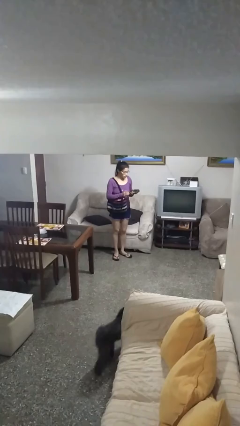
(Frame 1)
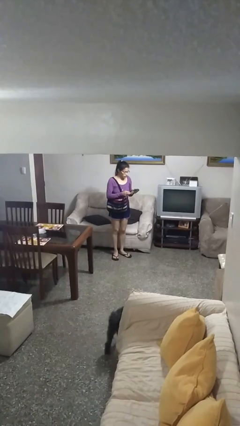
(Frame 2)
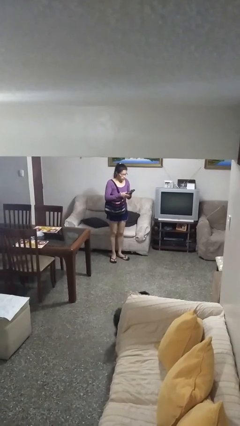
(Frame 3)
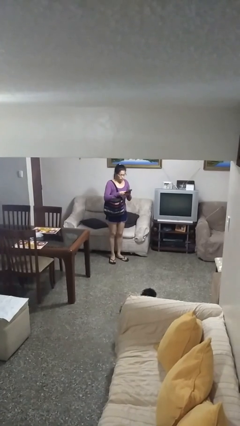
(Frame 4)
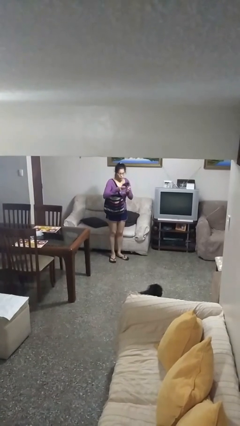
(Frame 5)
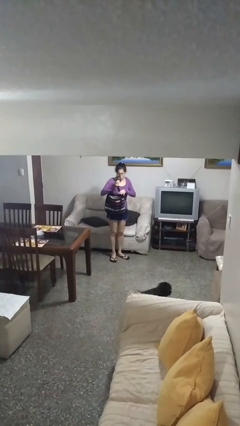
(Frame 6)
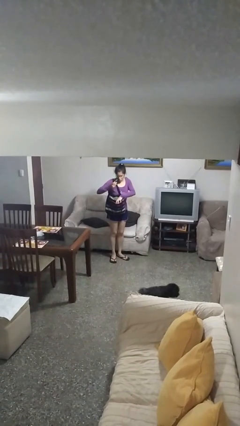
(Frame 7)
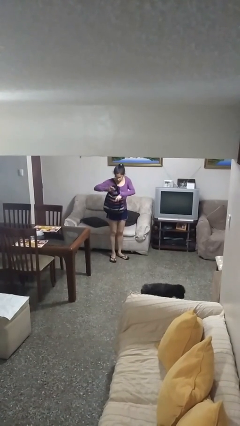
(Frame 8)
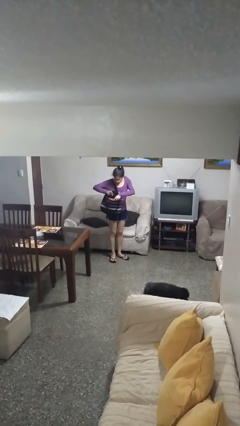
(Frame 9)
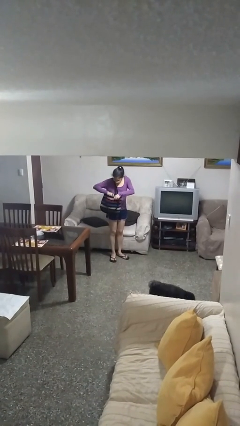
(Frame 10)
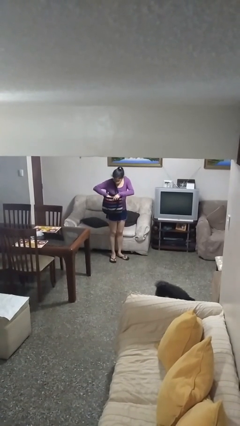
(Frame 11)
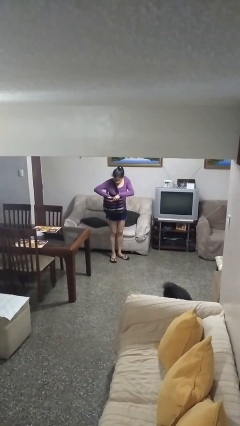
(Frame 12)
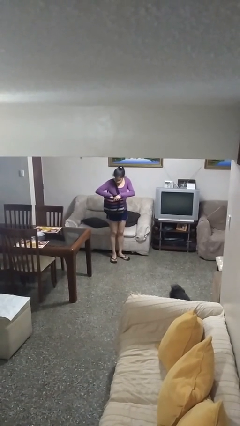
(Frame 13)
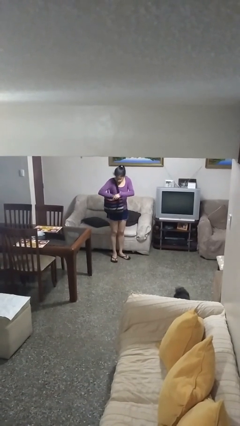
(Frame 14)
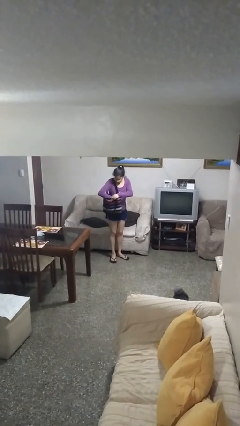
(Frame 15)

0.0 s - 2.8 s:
person puts object into purse

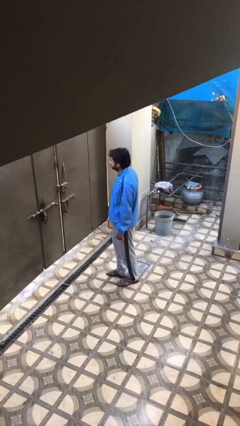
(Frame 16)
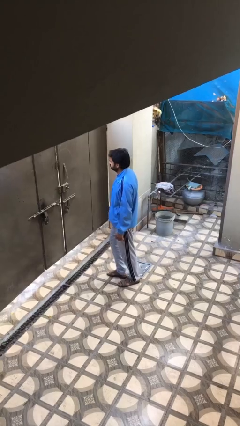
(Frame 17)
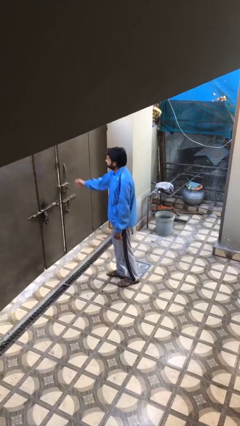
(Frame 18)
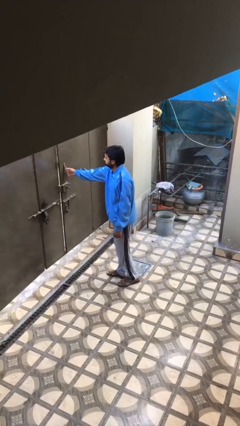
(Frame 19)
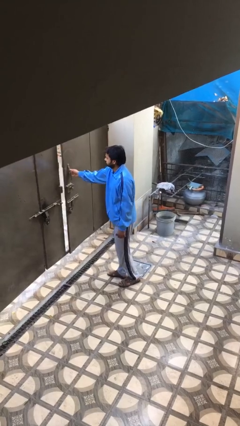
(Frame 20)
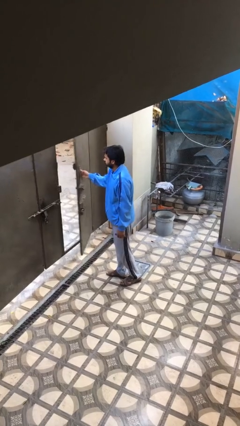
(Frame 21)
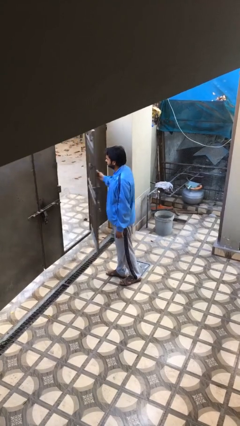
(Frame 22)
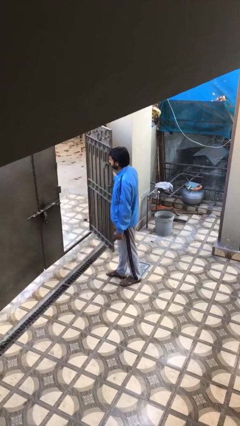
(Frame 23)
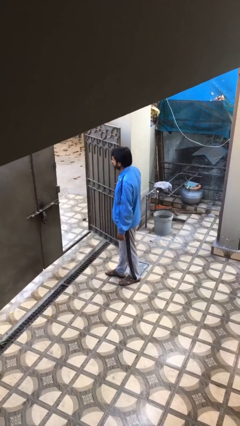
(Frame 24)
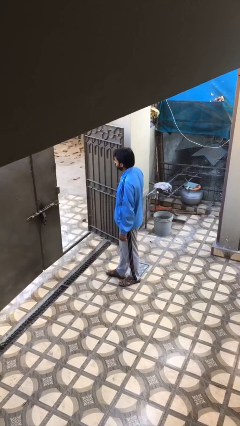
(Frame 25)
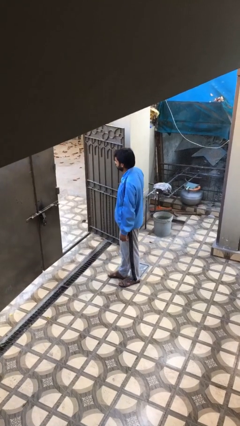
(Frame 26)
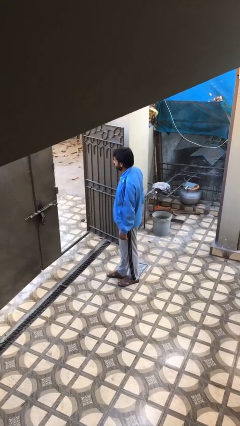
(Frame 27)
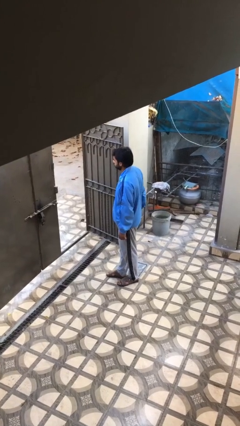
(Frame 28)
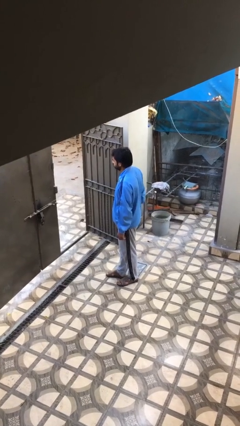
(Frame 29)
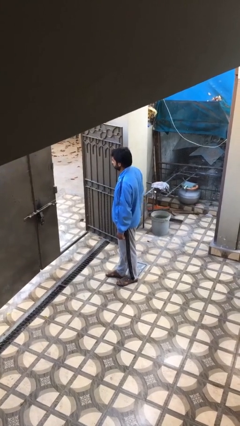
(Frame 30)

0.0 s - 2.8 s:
person opens facility door

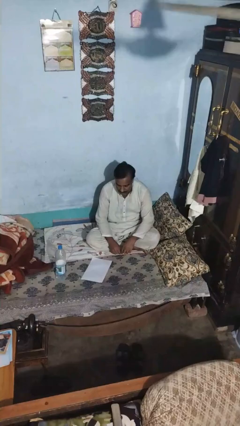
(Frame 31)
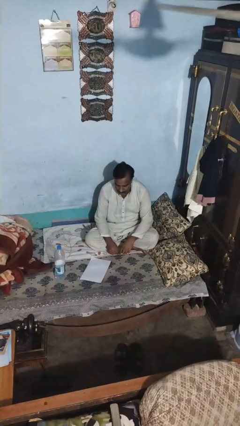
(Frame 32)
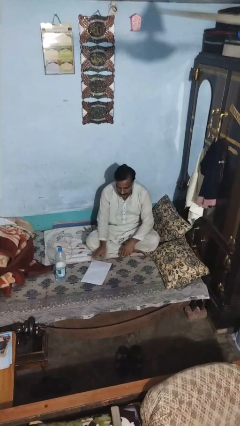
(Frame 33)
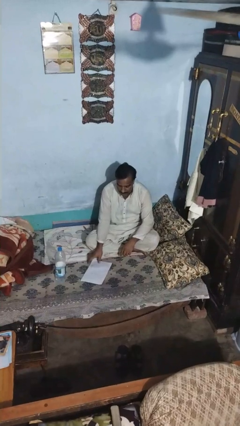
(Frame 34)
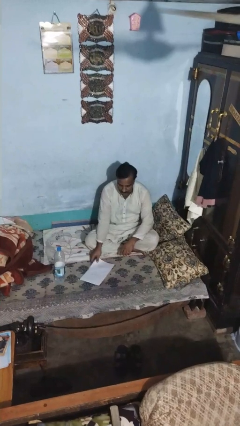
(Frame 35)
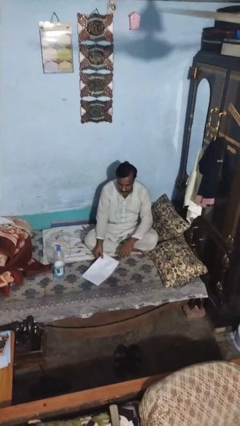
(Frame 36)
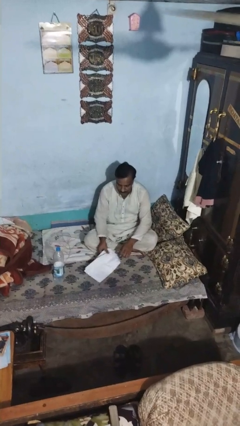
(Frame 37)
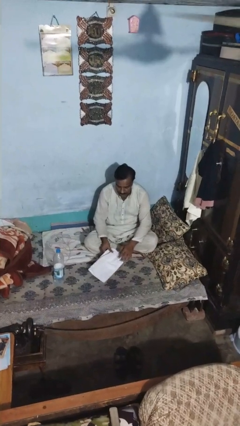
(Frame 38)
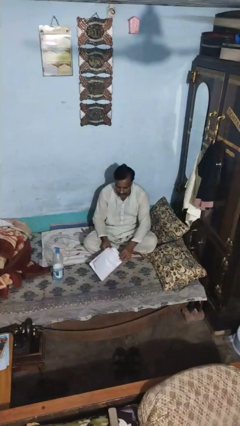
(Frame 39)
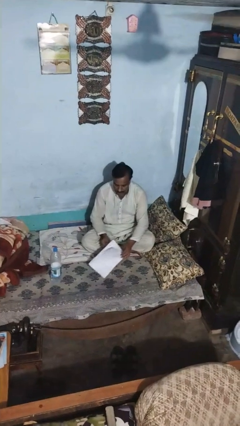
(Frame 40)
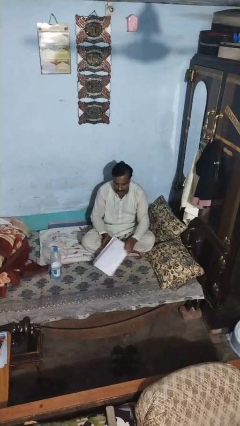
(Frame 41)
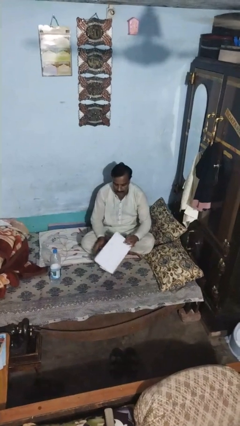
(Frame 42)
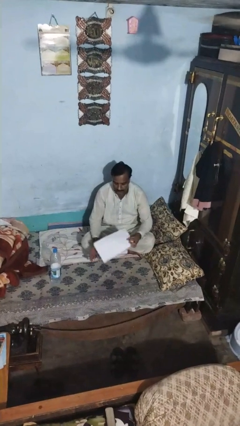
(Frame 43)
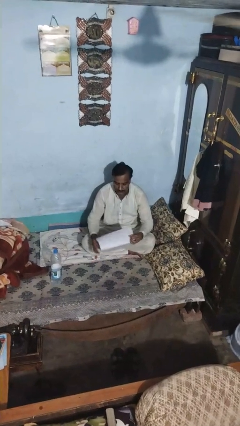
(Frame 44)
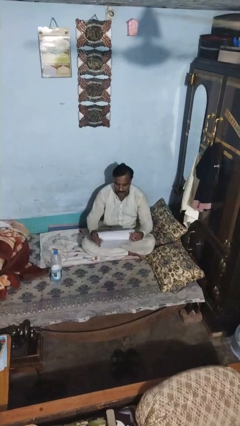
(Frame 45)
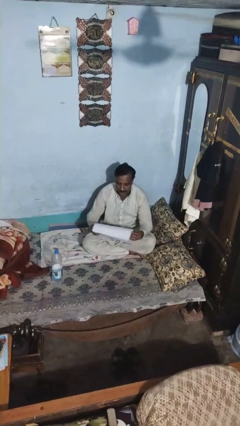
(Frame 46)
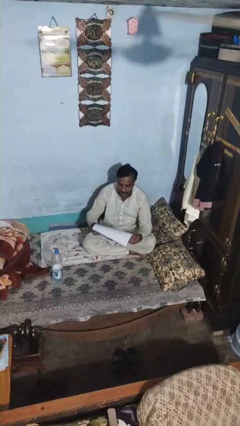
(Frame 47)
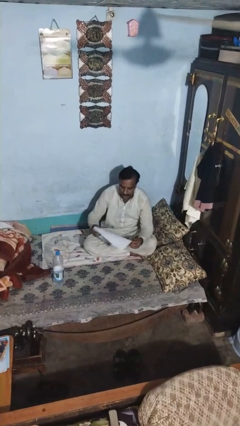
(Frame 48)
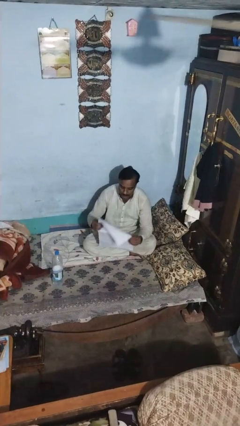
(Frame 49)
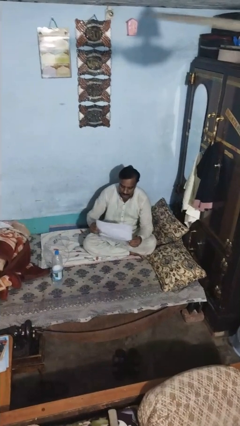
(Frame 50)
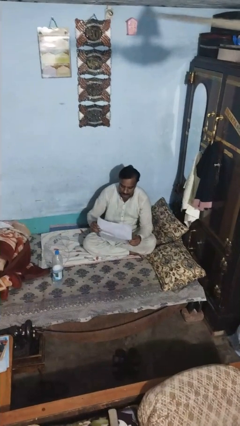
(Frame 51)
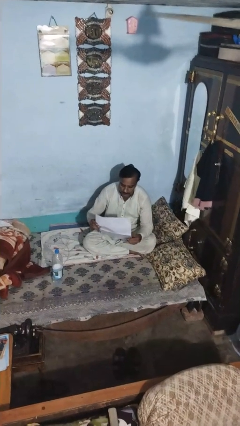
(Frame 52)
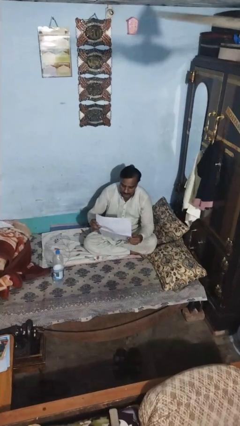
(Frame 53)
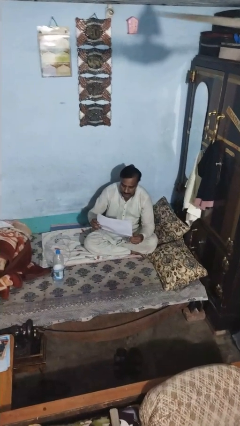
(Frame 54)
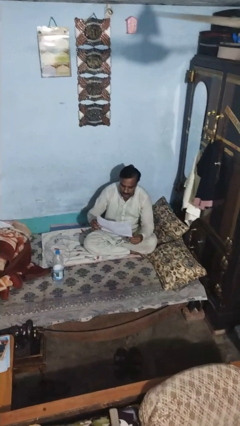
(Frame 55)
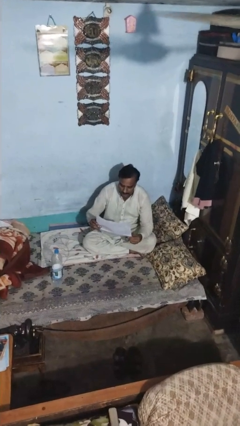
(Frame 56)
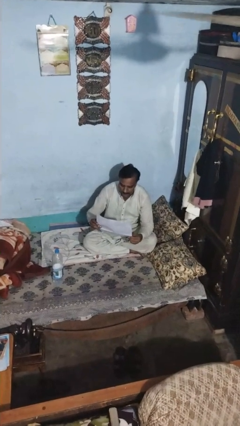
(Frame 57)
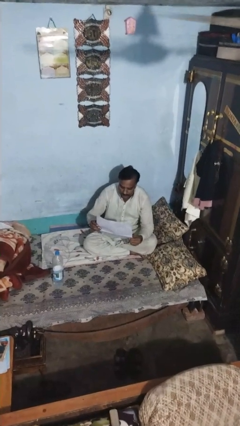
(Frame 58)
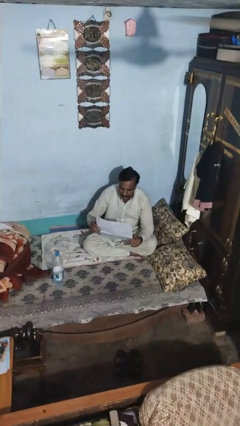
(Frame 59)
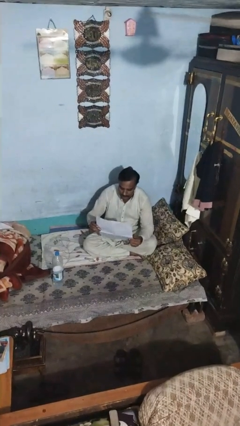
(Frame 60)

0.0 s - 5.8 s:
person reads newspaper

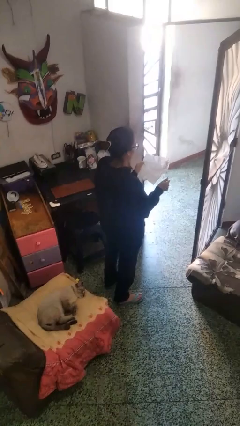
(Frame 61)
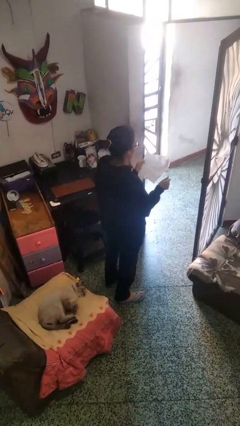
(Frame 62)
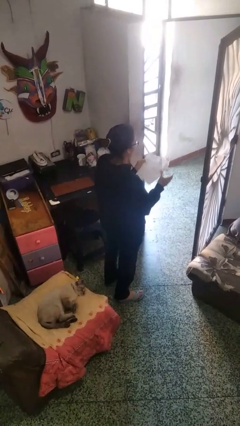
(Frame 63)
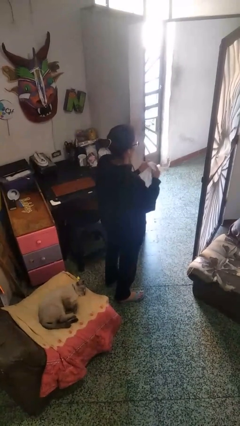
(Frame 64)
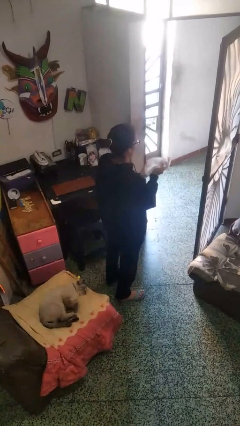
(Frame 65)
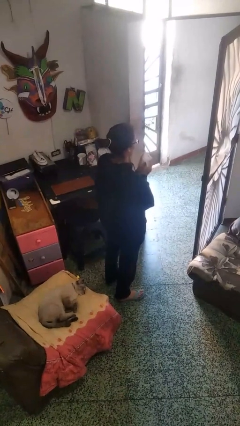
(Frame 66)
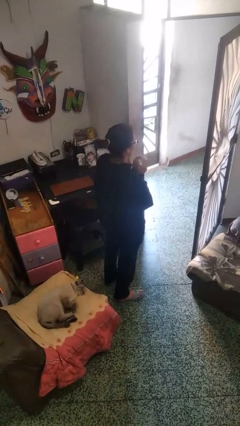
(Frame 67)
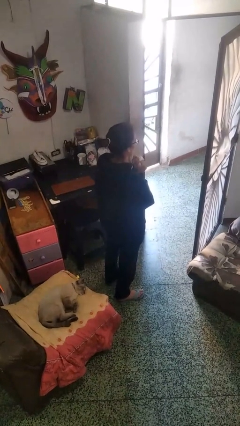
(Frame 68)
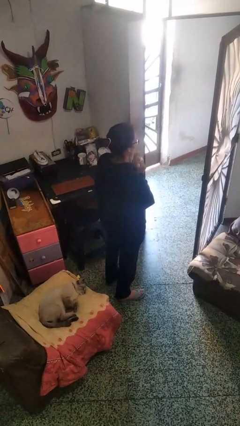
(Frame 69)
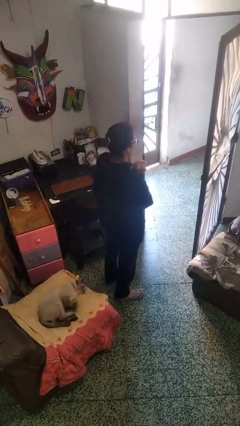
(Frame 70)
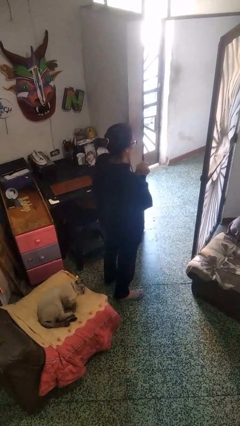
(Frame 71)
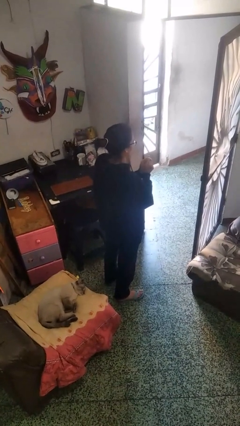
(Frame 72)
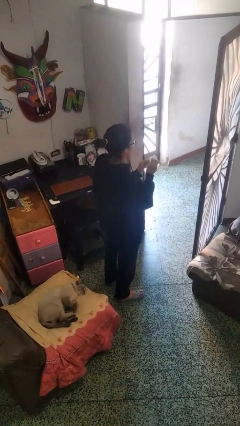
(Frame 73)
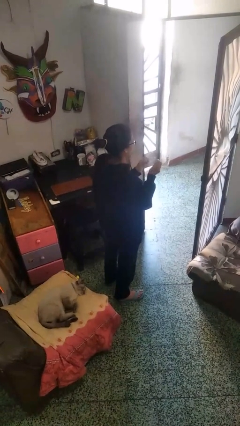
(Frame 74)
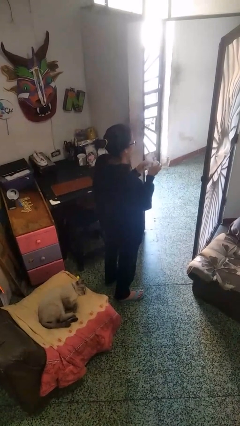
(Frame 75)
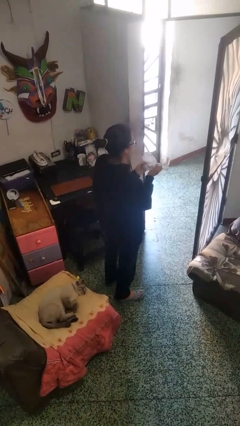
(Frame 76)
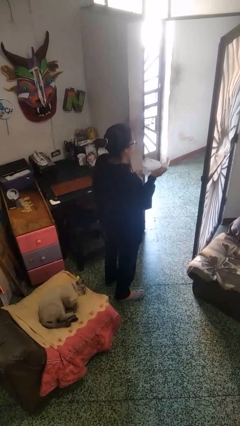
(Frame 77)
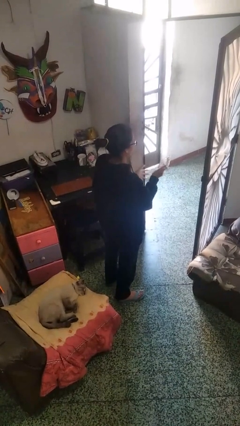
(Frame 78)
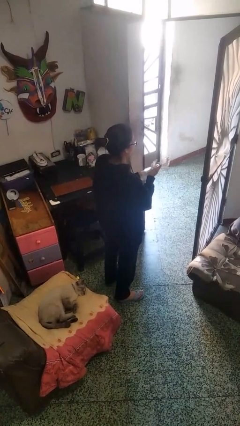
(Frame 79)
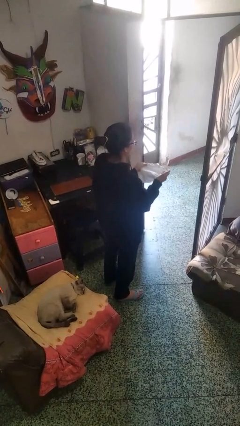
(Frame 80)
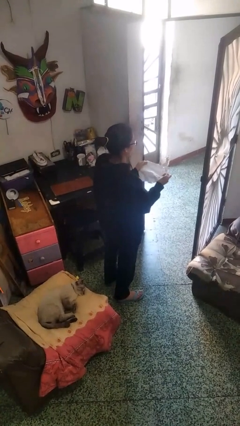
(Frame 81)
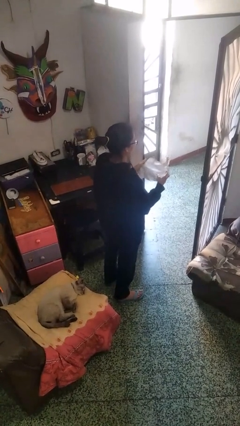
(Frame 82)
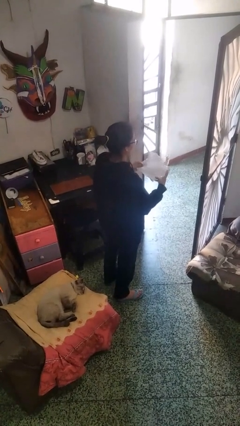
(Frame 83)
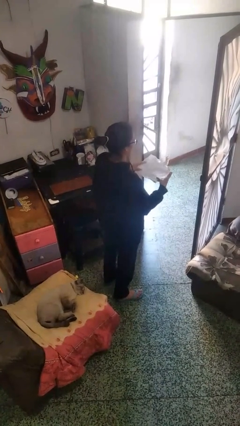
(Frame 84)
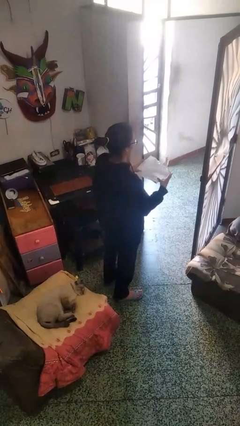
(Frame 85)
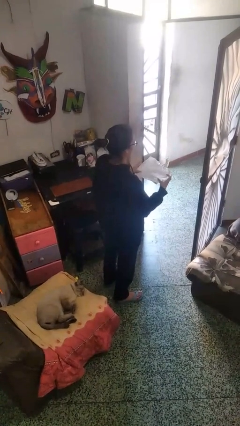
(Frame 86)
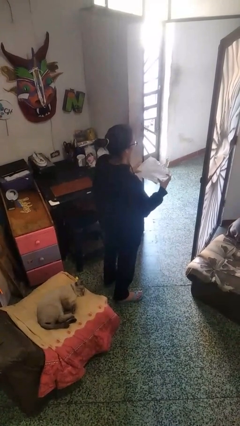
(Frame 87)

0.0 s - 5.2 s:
person crumples paper

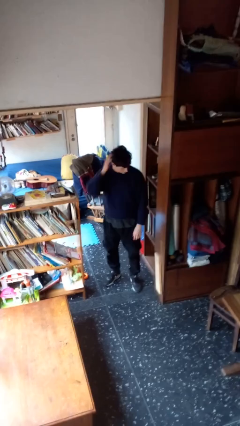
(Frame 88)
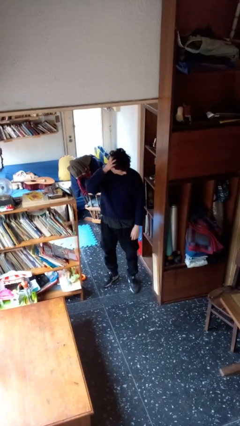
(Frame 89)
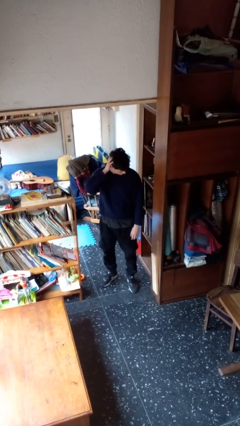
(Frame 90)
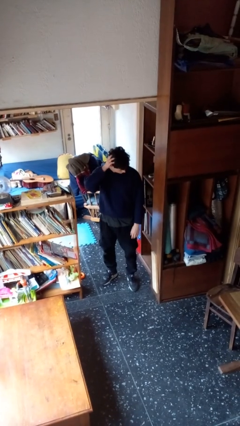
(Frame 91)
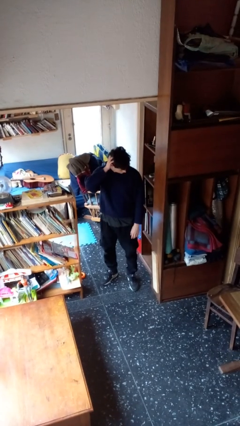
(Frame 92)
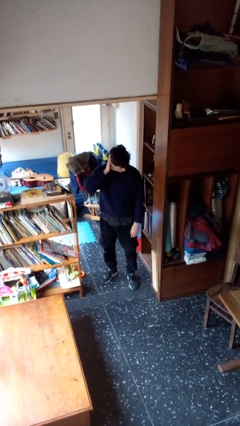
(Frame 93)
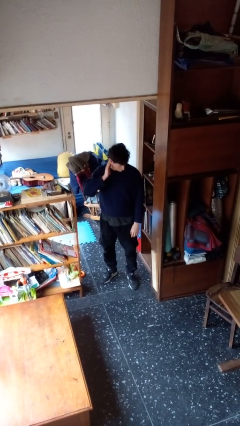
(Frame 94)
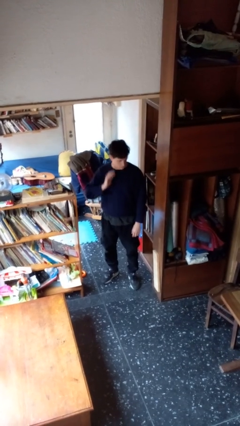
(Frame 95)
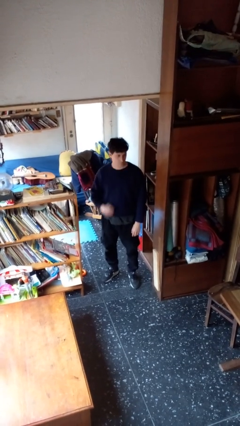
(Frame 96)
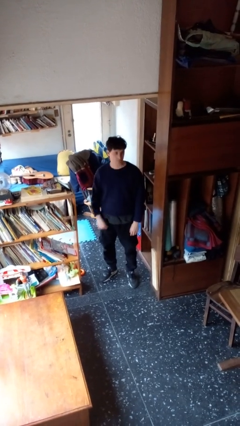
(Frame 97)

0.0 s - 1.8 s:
person pats head
